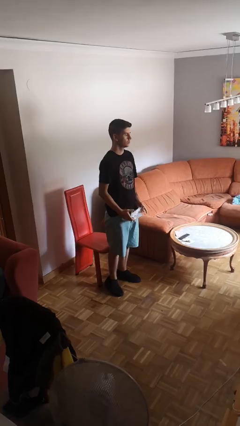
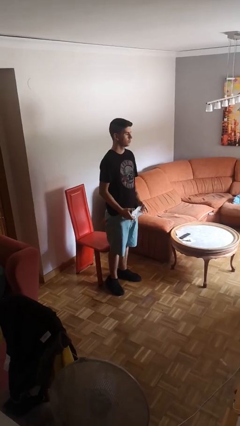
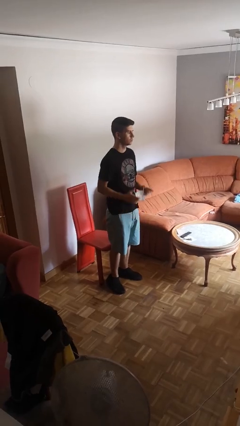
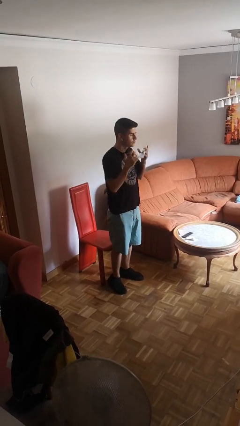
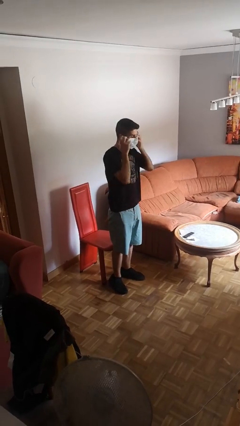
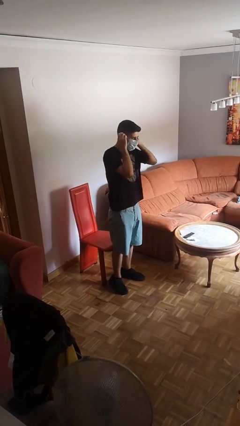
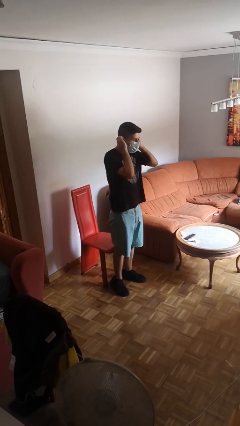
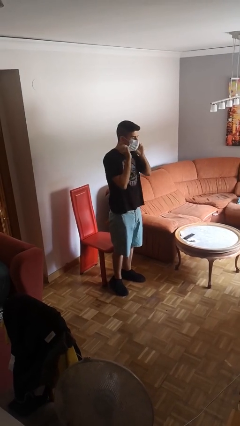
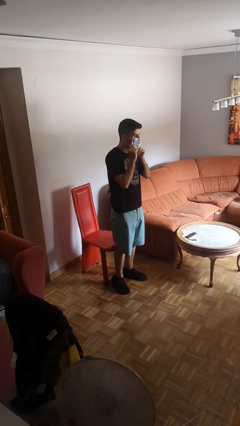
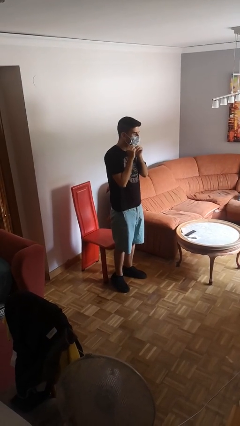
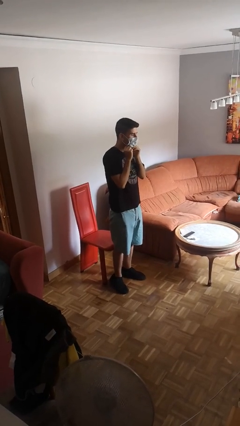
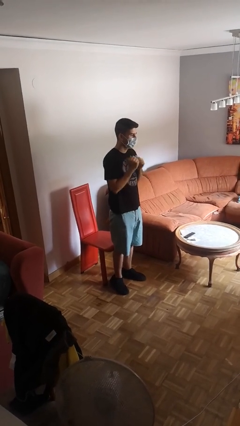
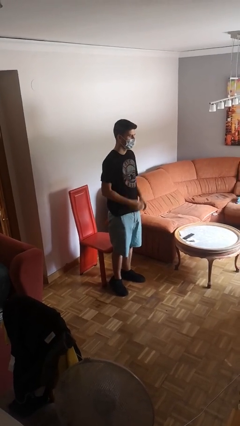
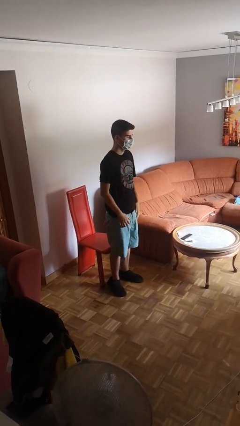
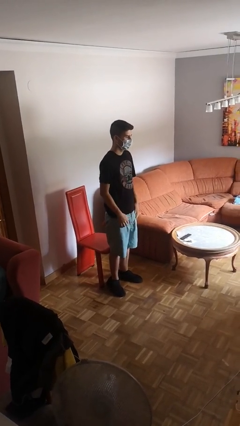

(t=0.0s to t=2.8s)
person puts on facemask

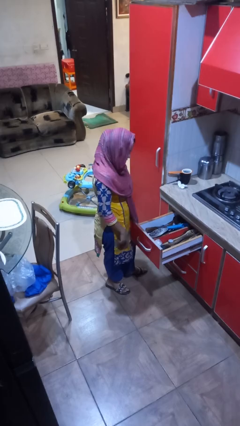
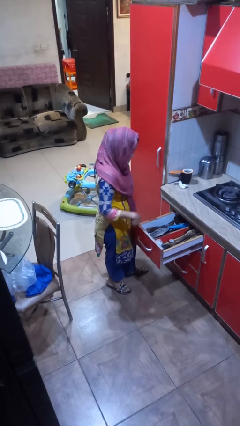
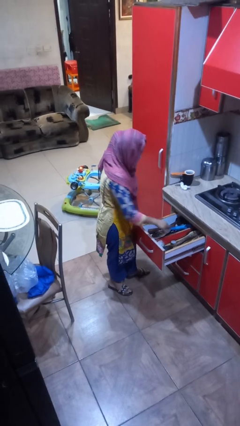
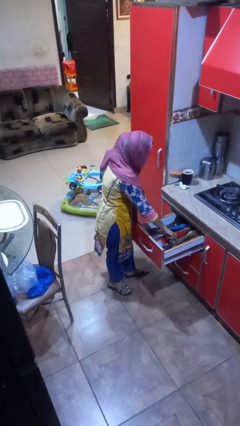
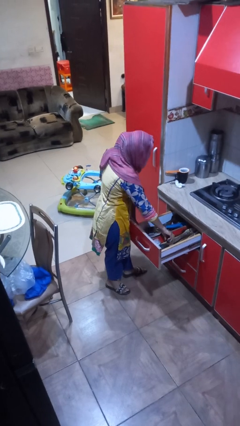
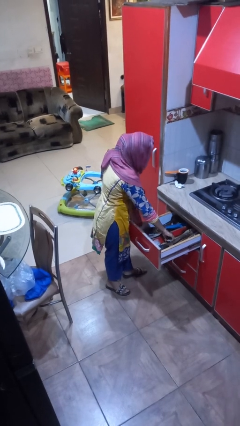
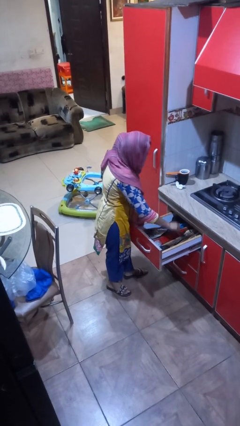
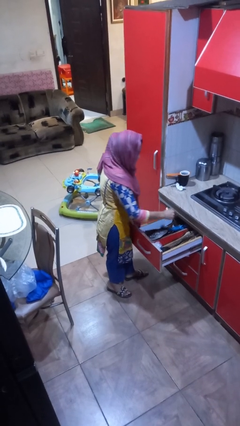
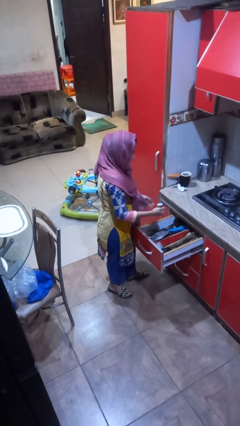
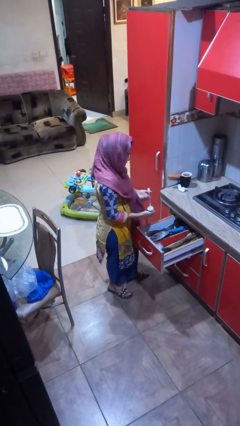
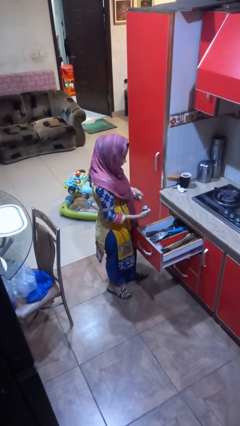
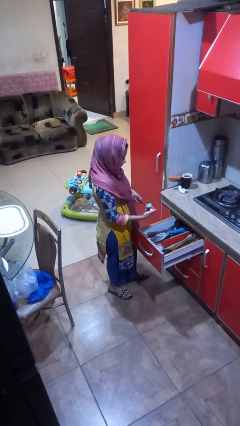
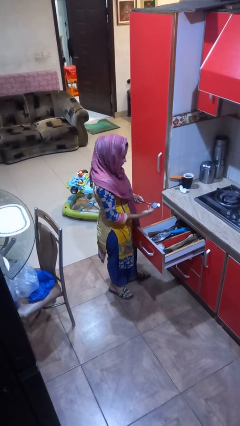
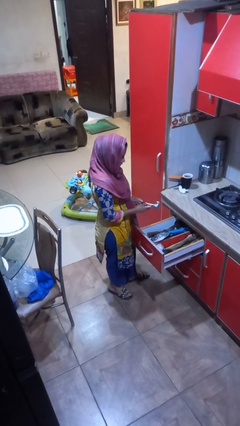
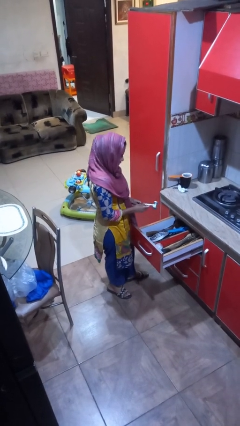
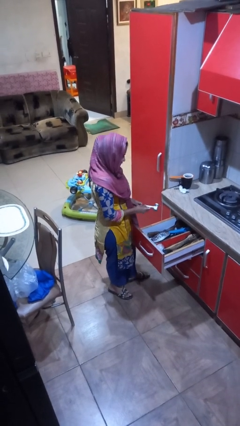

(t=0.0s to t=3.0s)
person takes object from kitchen drawer

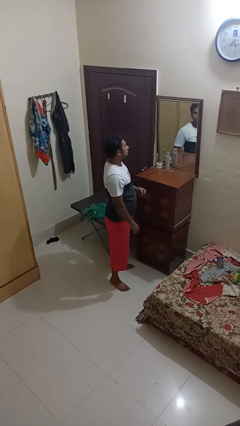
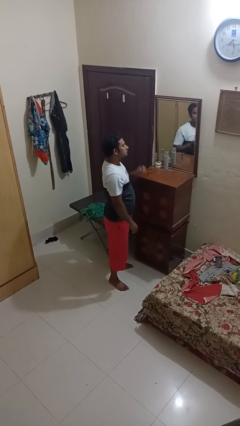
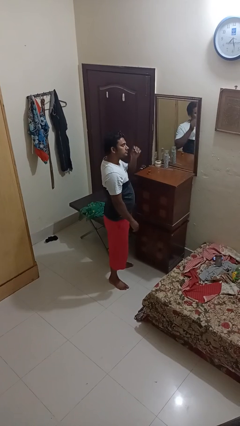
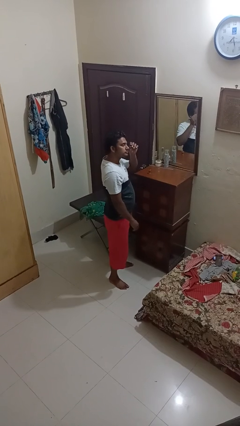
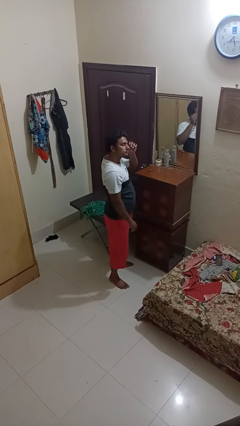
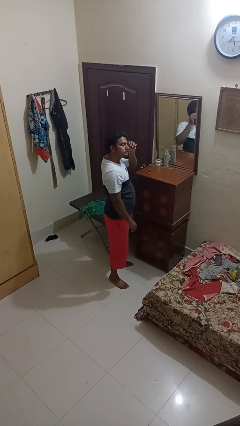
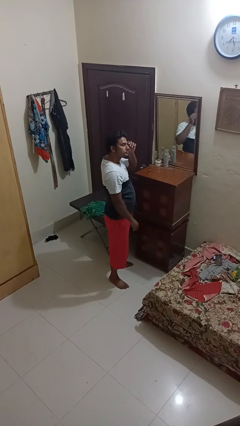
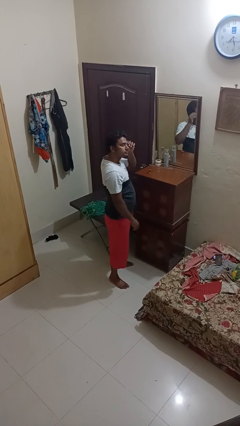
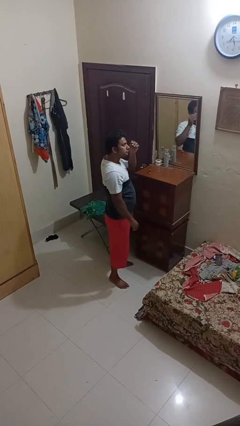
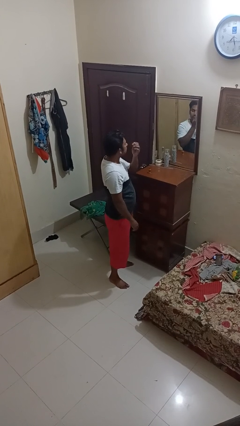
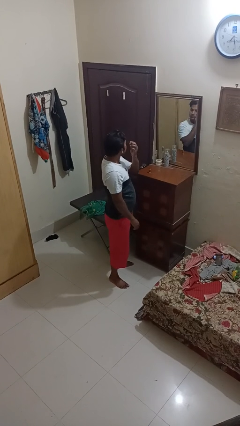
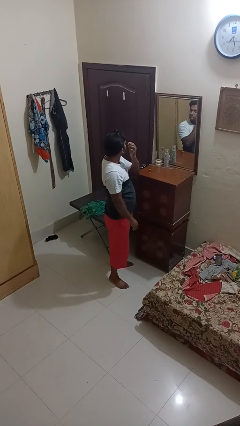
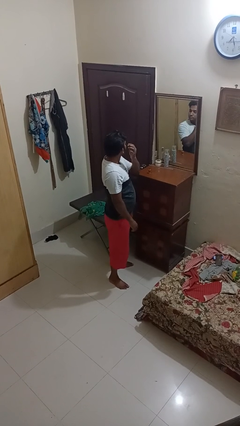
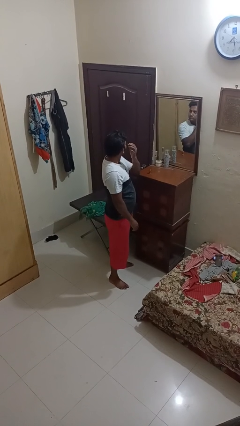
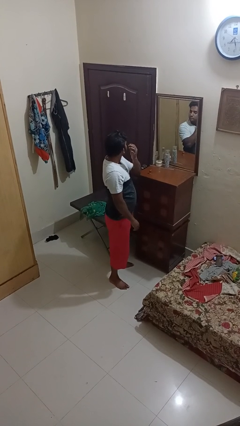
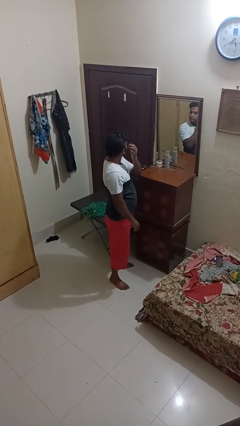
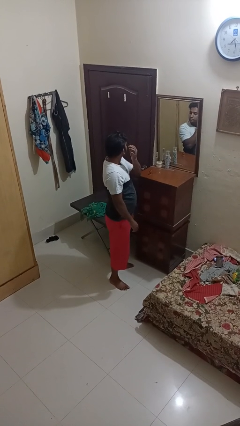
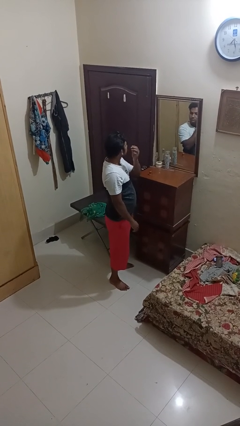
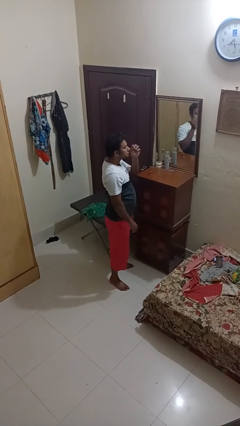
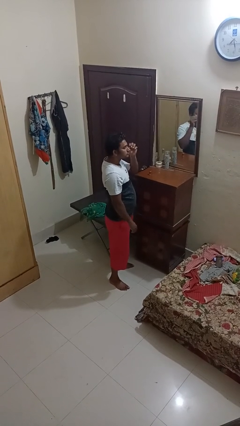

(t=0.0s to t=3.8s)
person applies eye makeup

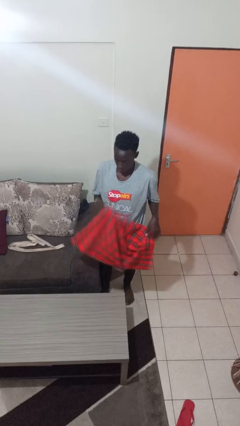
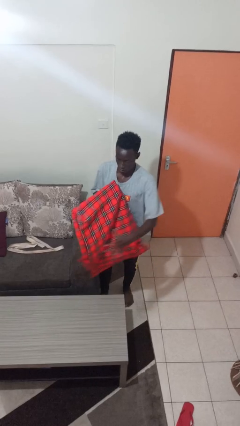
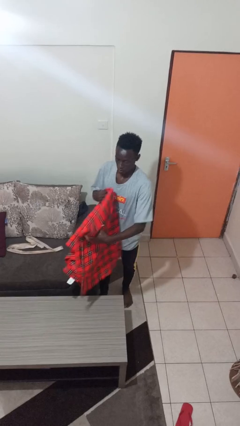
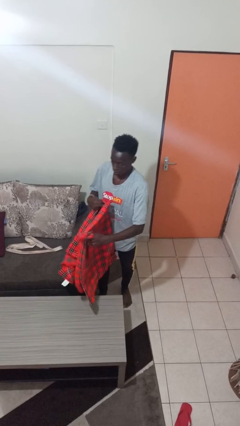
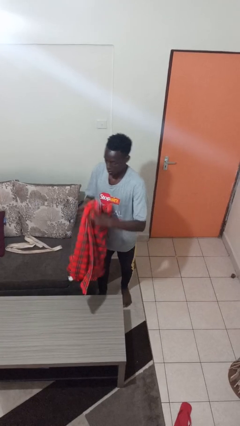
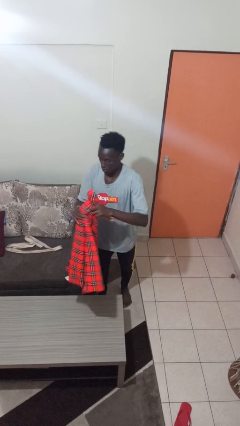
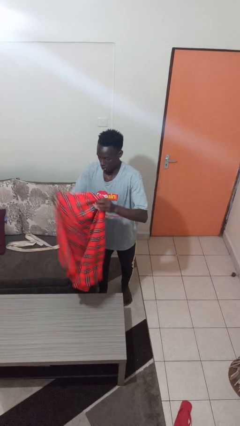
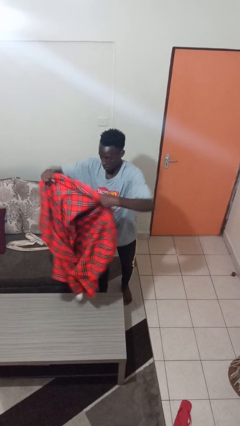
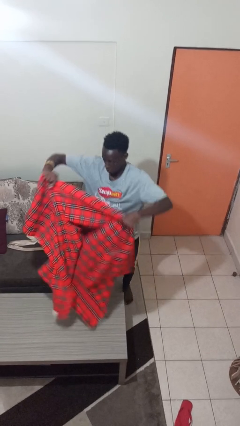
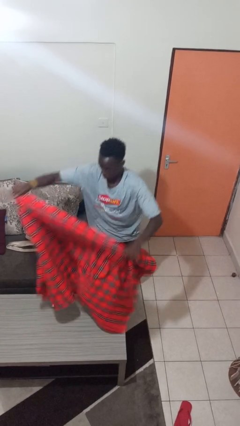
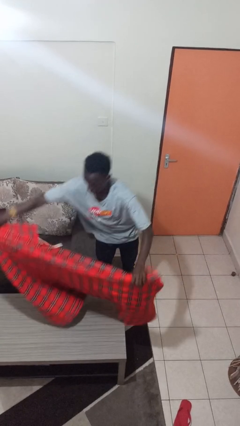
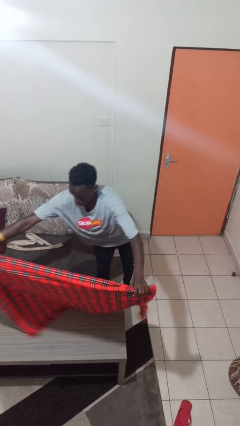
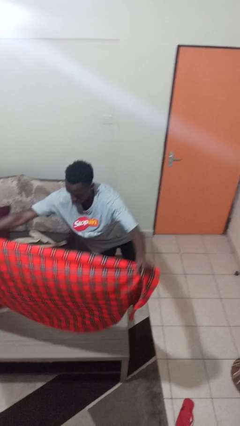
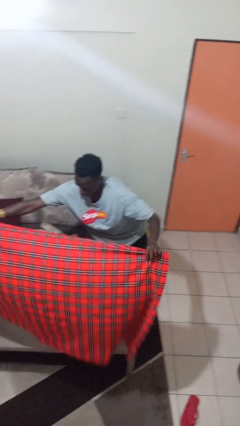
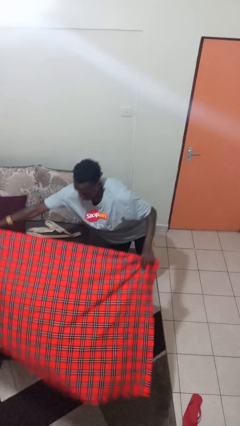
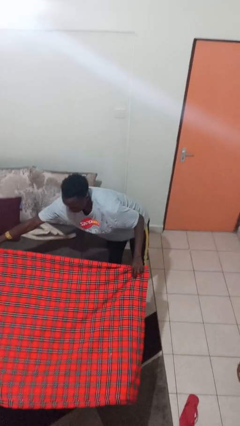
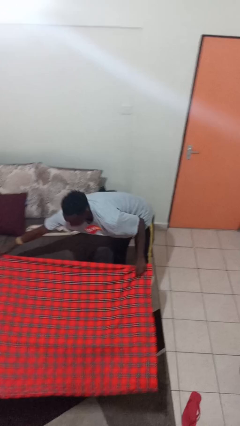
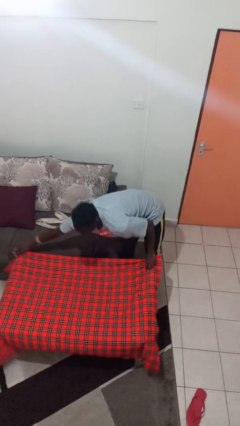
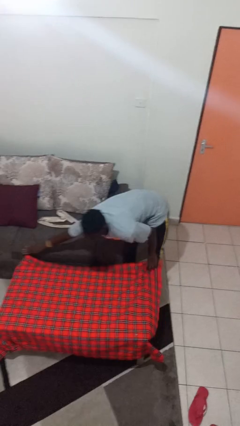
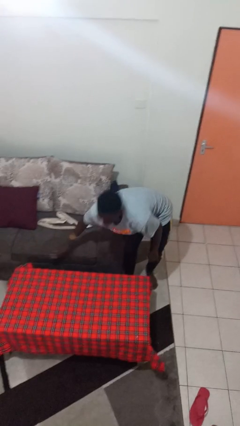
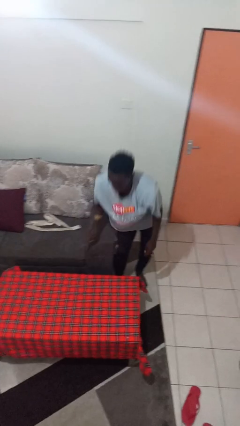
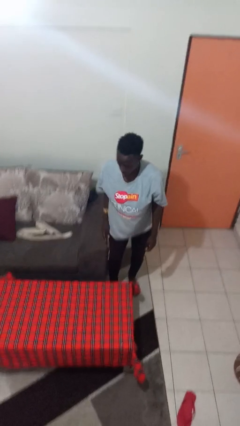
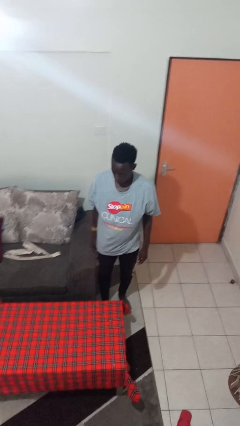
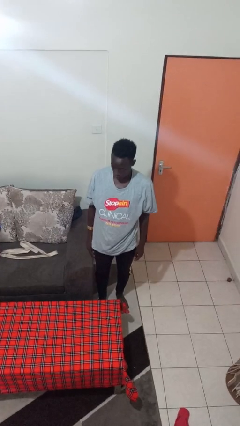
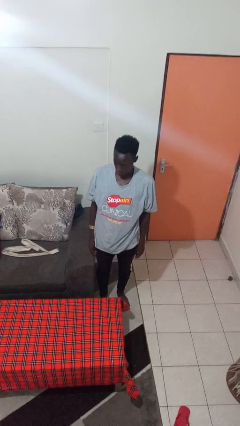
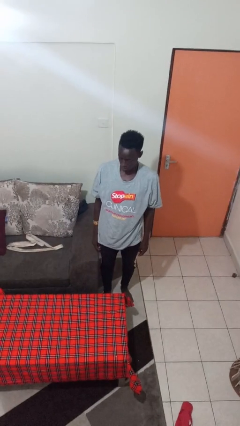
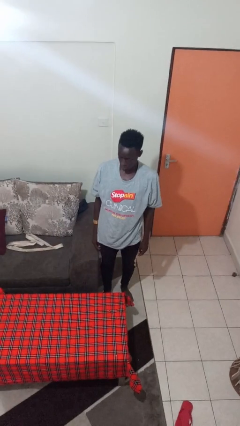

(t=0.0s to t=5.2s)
person spreads tablecloth

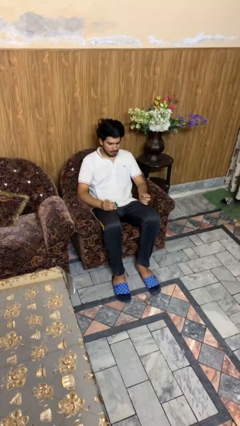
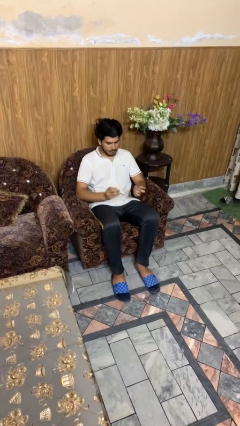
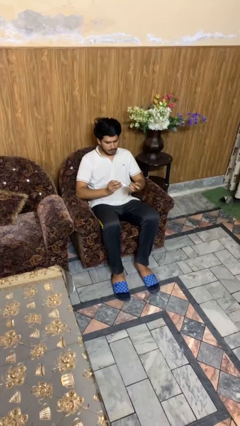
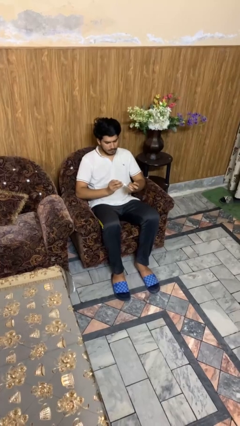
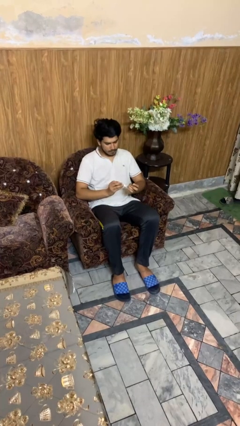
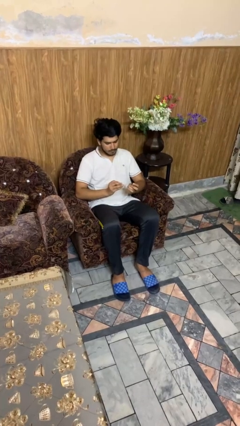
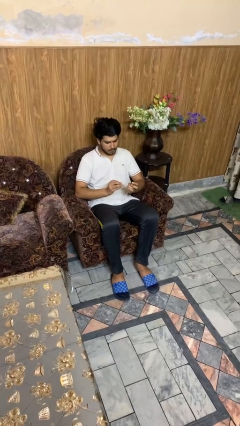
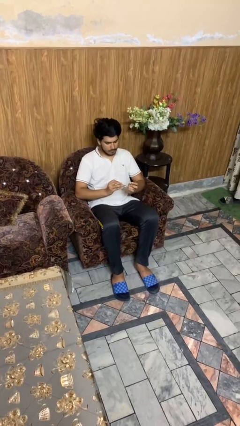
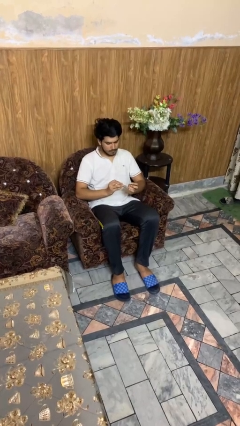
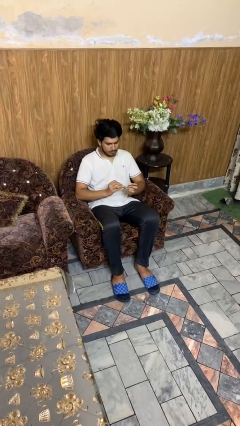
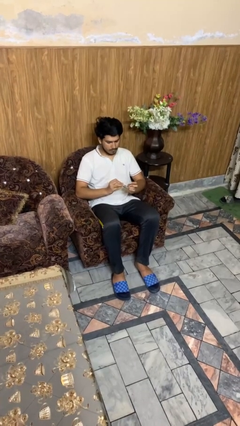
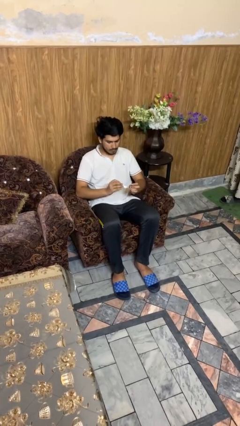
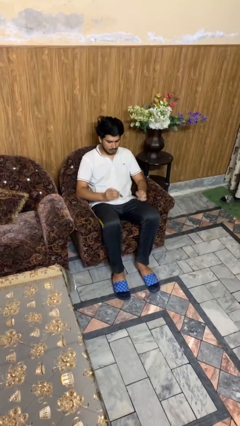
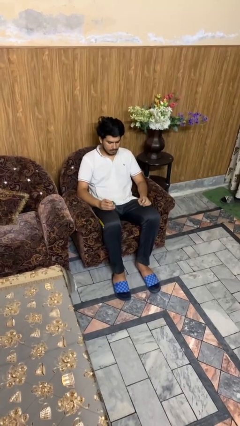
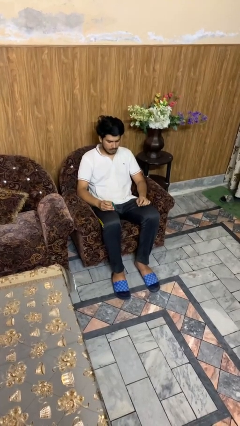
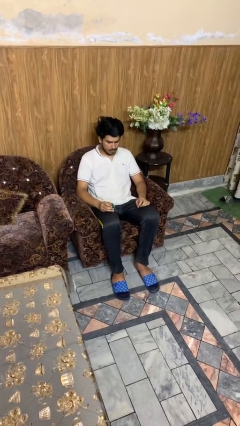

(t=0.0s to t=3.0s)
person clips fingernails

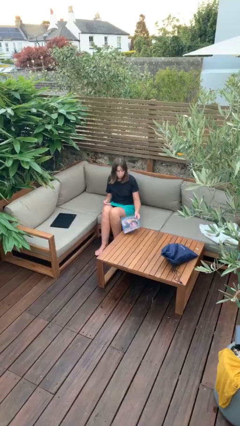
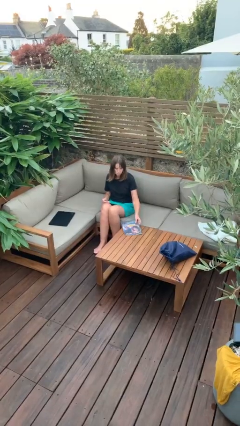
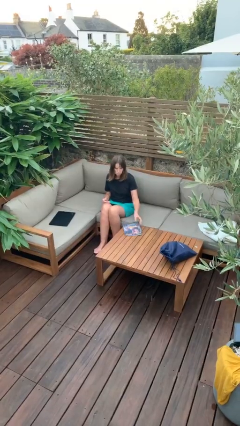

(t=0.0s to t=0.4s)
person puts down object on table
